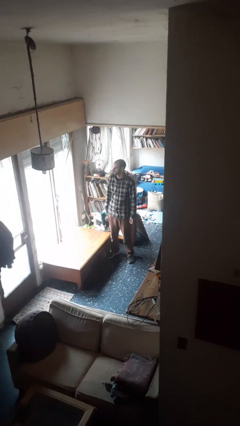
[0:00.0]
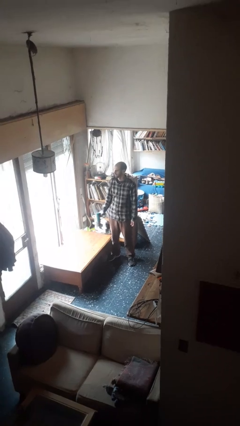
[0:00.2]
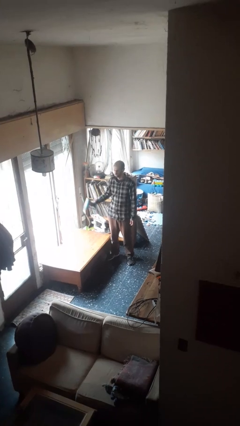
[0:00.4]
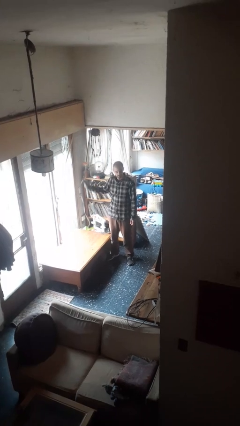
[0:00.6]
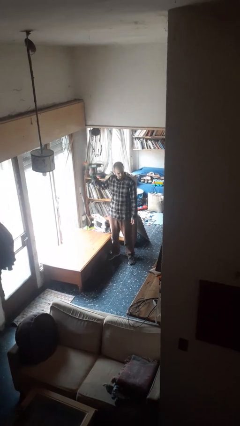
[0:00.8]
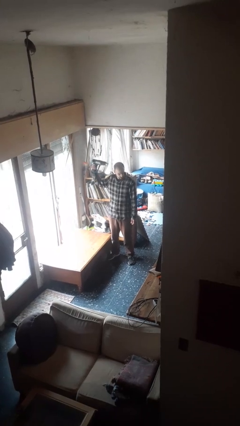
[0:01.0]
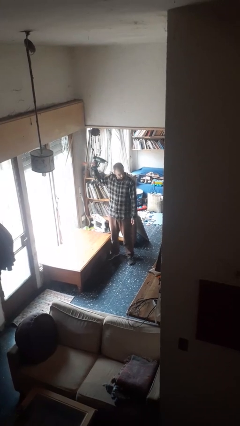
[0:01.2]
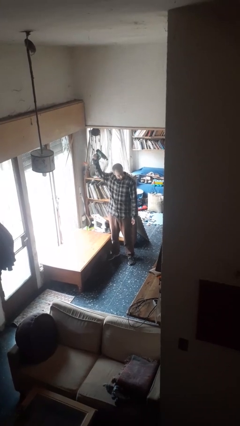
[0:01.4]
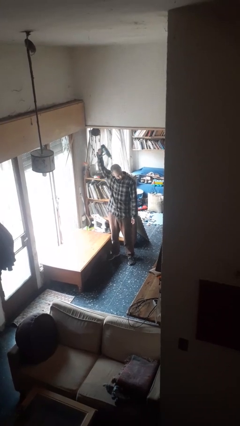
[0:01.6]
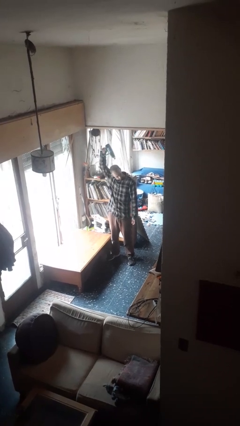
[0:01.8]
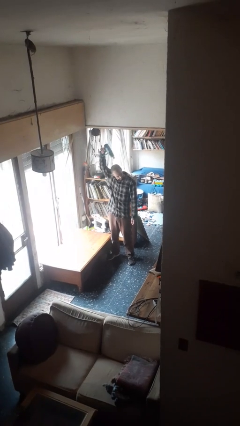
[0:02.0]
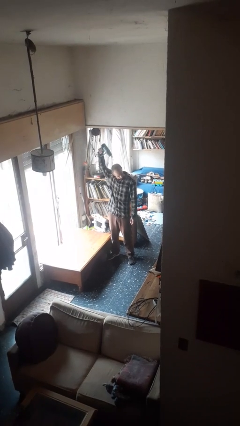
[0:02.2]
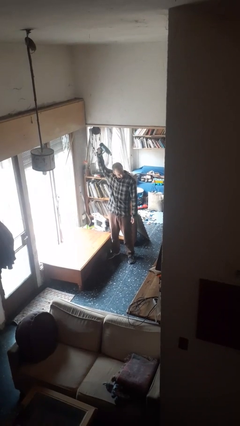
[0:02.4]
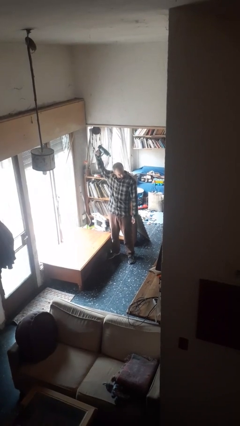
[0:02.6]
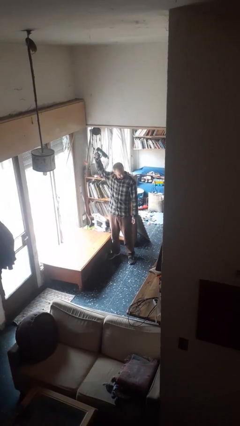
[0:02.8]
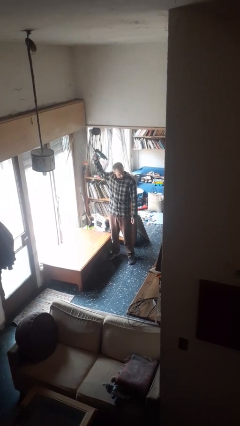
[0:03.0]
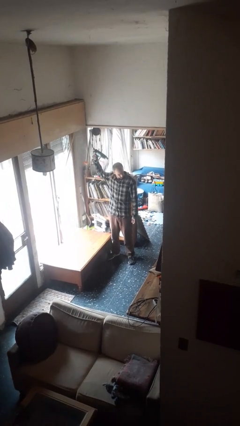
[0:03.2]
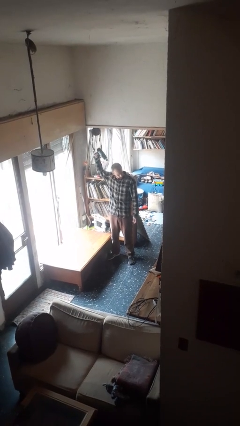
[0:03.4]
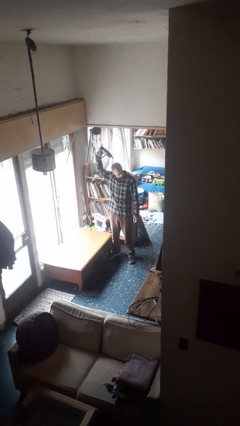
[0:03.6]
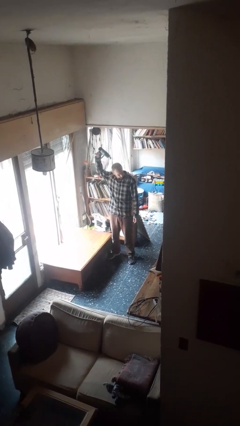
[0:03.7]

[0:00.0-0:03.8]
person dries hair with hairdryer

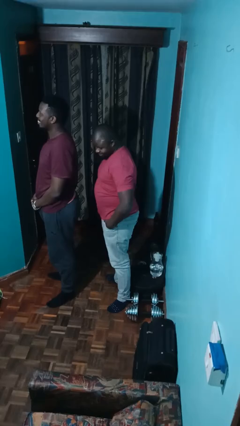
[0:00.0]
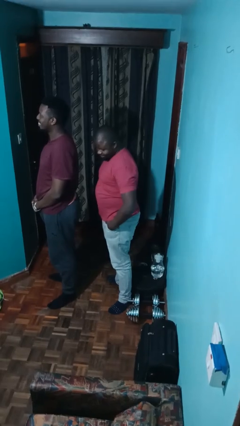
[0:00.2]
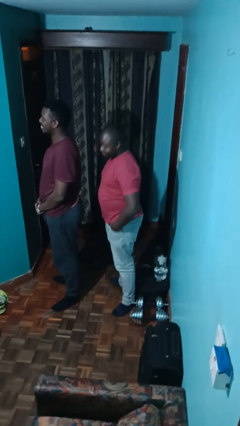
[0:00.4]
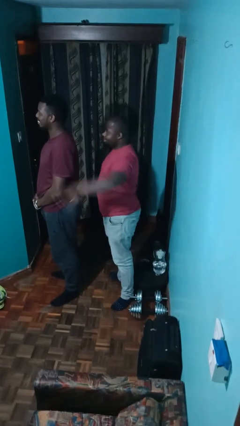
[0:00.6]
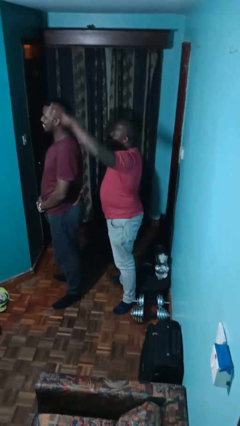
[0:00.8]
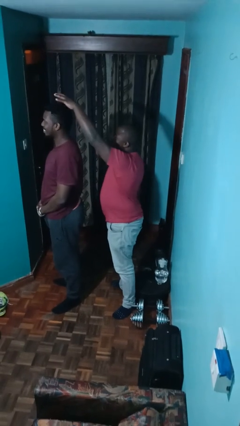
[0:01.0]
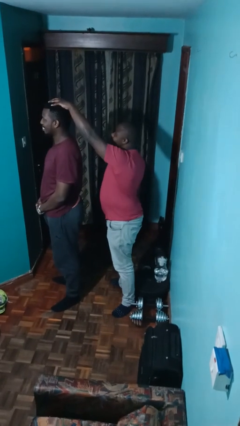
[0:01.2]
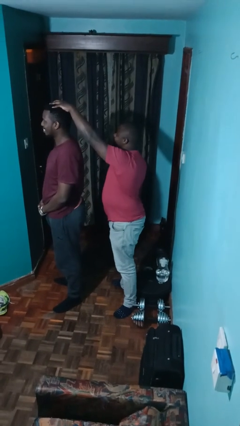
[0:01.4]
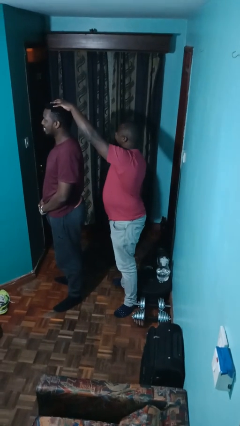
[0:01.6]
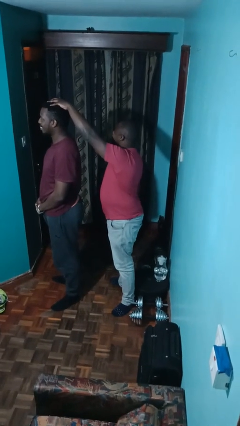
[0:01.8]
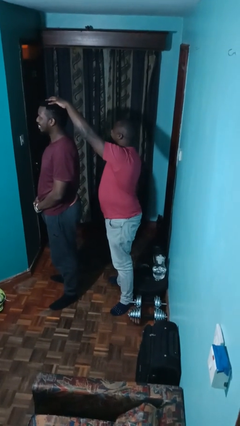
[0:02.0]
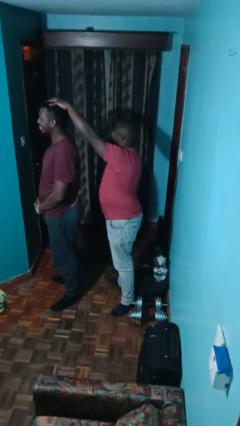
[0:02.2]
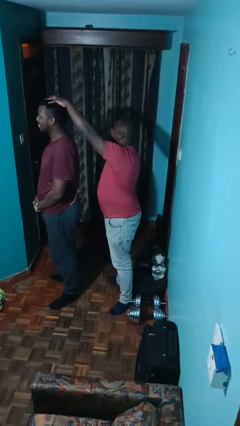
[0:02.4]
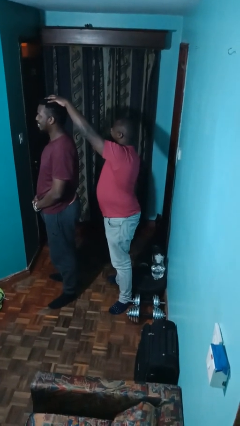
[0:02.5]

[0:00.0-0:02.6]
person grabs person by hair

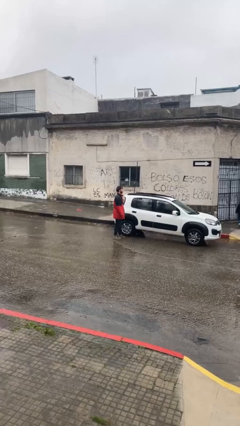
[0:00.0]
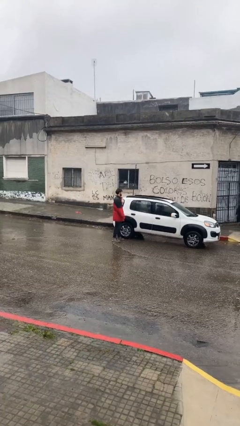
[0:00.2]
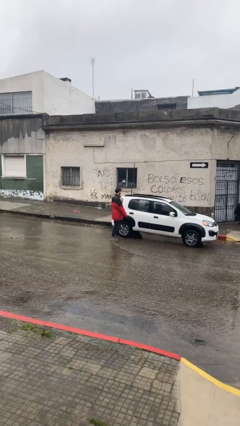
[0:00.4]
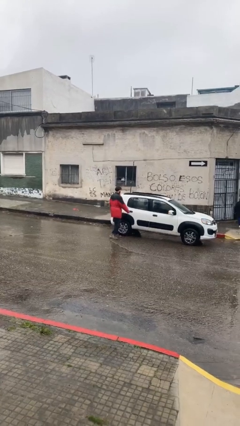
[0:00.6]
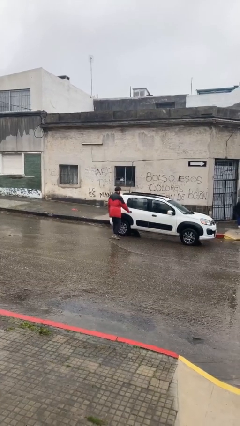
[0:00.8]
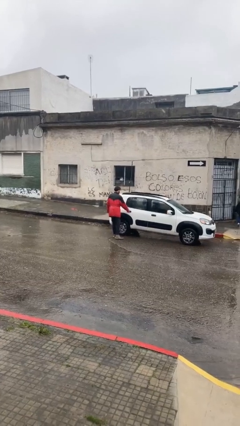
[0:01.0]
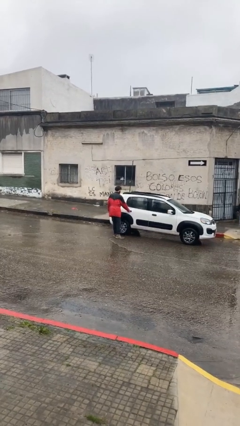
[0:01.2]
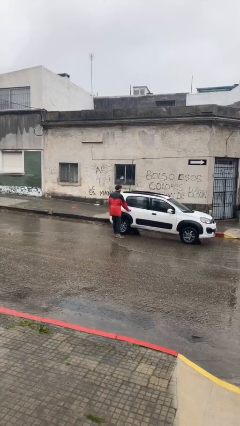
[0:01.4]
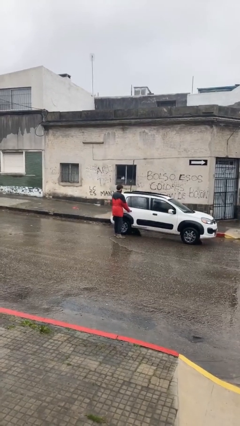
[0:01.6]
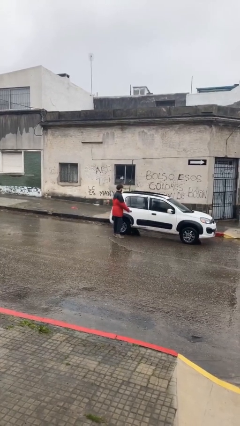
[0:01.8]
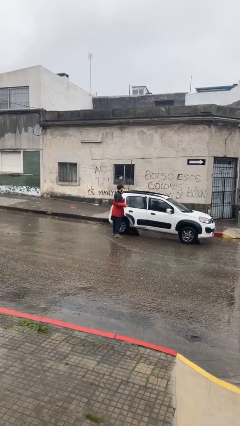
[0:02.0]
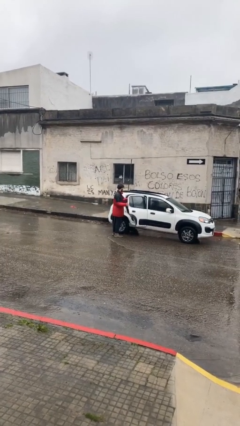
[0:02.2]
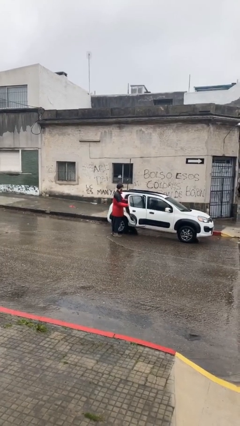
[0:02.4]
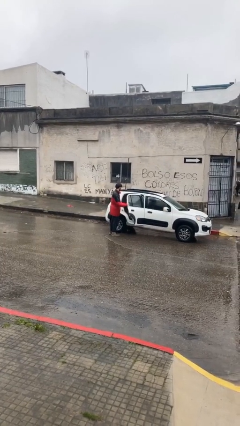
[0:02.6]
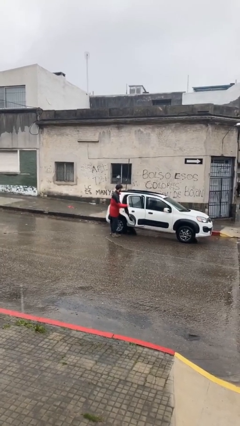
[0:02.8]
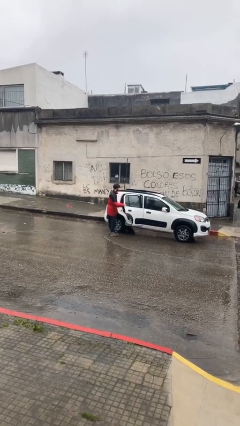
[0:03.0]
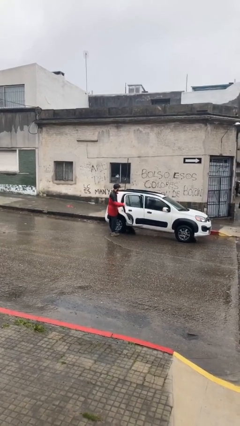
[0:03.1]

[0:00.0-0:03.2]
person opens car door

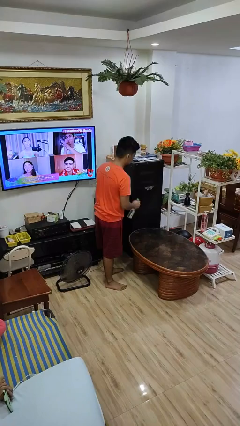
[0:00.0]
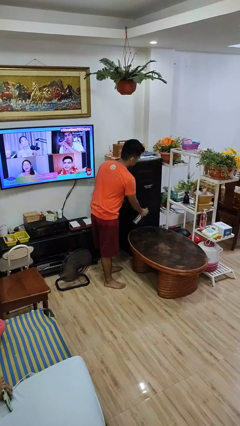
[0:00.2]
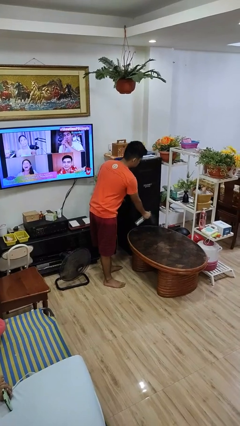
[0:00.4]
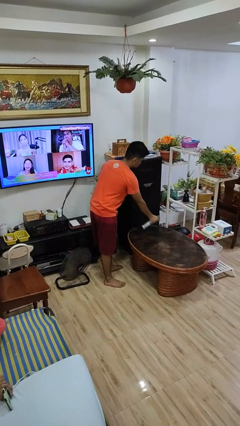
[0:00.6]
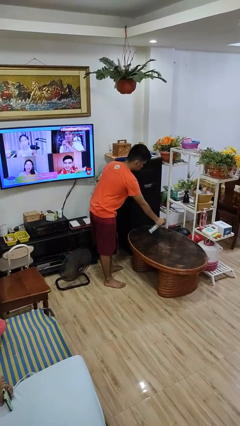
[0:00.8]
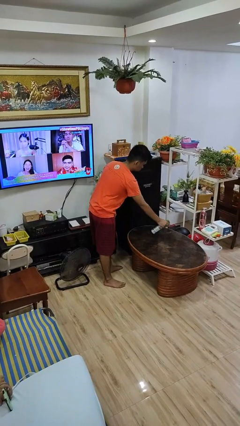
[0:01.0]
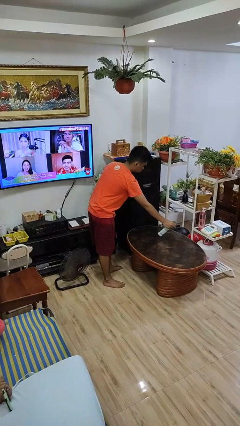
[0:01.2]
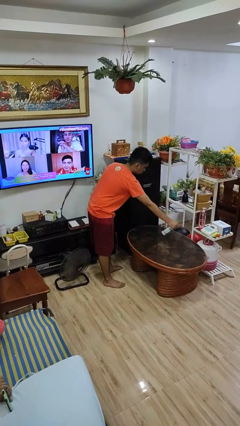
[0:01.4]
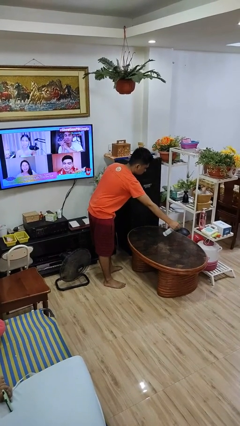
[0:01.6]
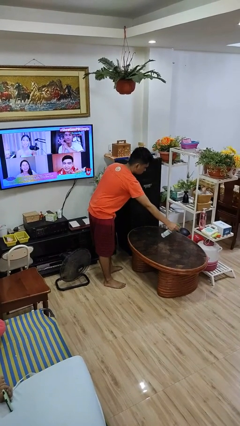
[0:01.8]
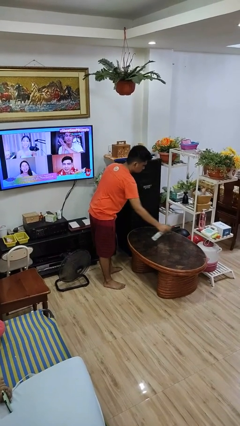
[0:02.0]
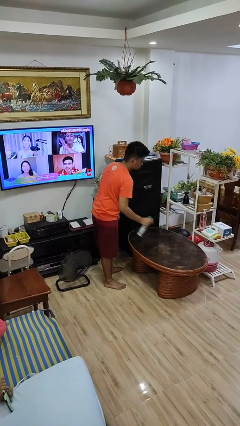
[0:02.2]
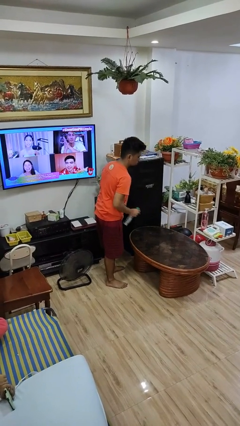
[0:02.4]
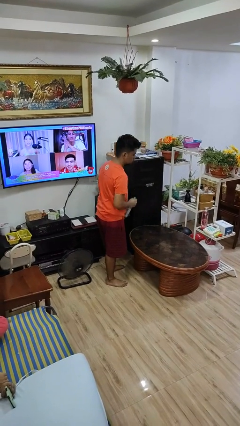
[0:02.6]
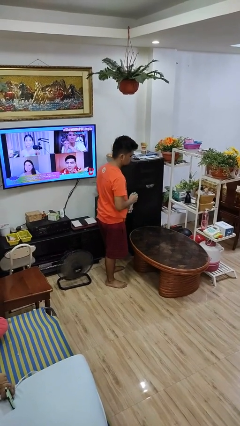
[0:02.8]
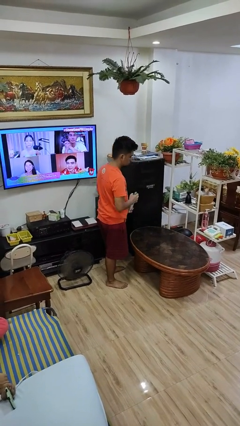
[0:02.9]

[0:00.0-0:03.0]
person sprays from bottle

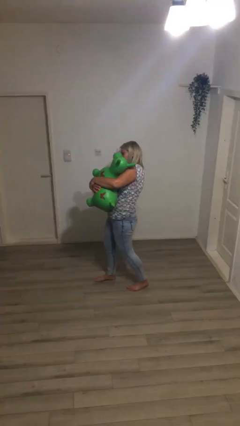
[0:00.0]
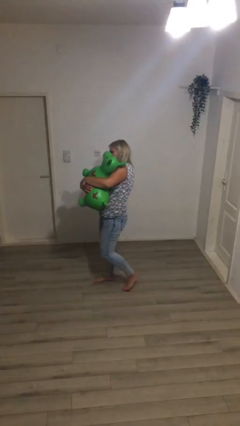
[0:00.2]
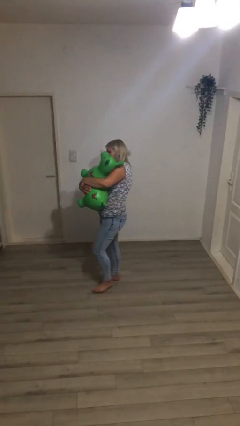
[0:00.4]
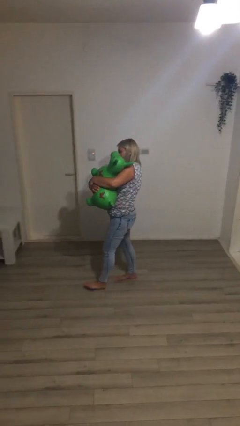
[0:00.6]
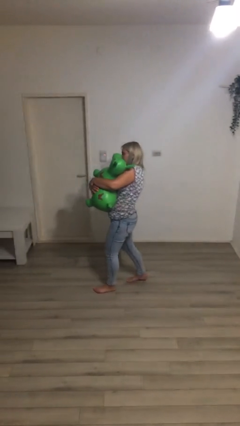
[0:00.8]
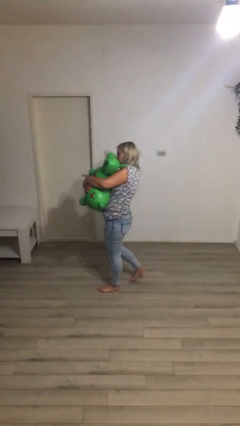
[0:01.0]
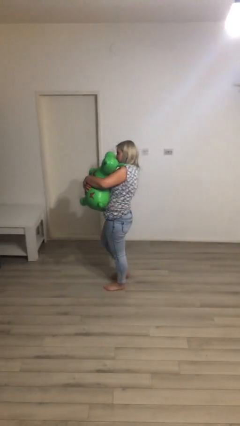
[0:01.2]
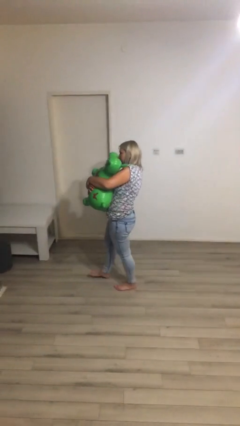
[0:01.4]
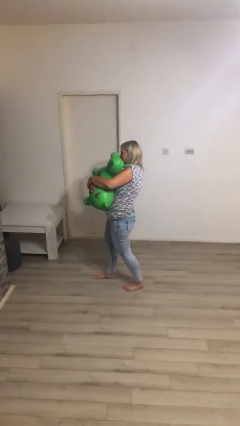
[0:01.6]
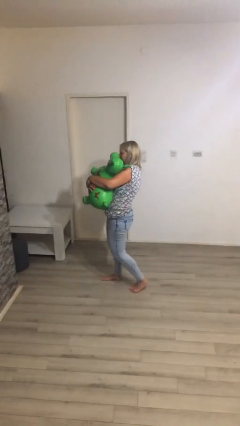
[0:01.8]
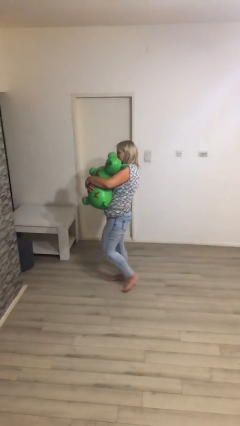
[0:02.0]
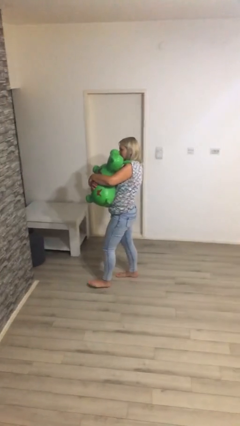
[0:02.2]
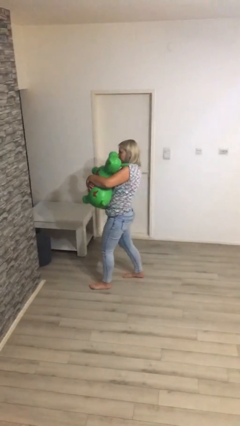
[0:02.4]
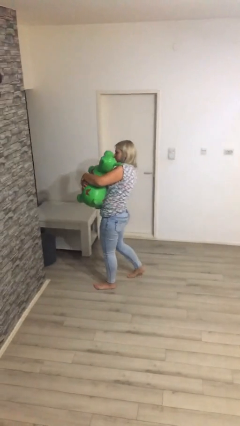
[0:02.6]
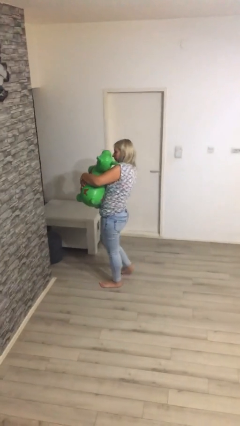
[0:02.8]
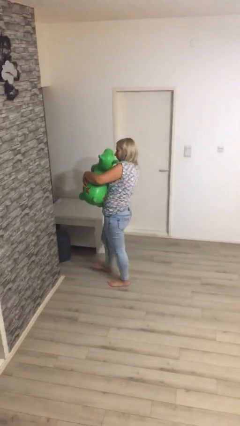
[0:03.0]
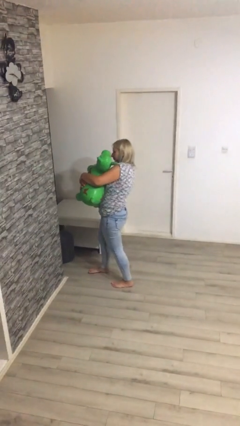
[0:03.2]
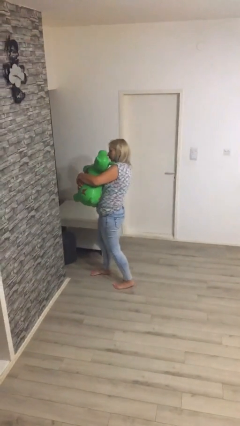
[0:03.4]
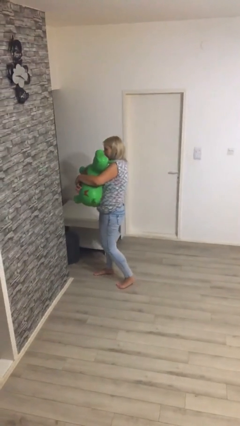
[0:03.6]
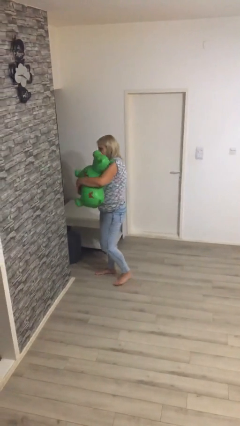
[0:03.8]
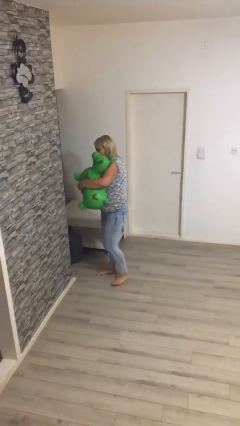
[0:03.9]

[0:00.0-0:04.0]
person carries heavy object

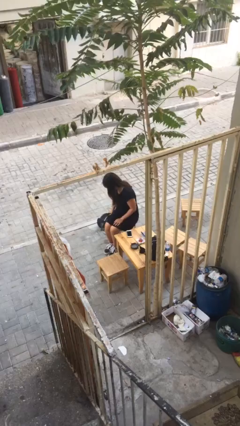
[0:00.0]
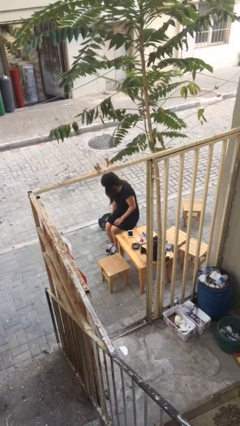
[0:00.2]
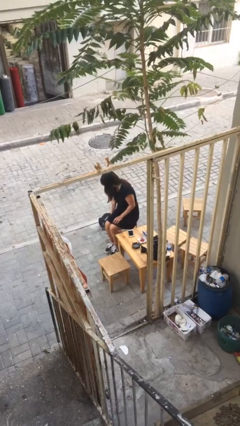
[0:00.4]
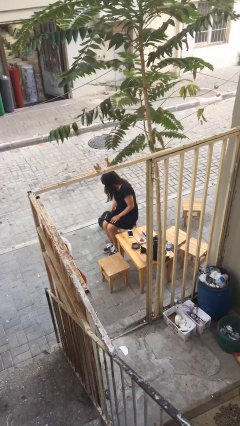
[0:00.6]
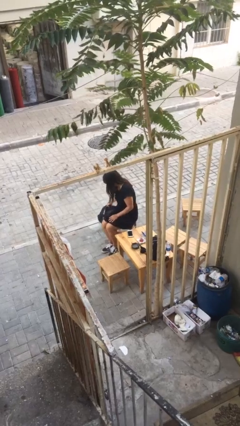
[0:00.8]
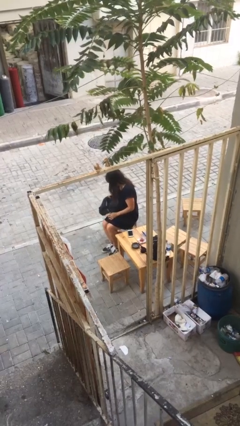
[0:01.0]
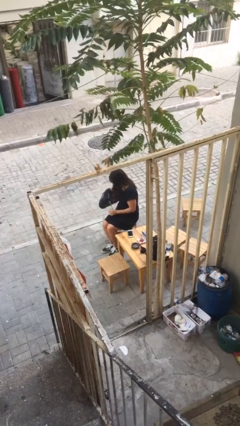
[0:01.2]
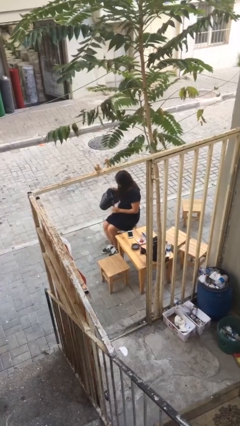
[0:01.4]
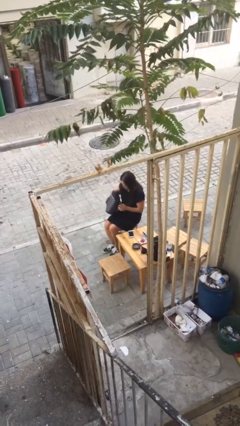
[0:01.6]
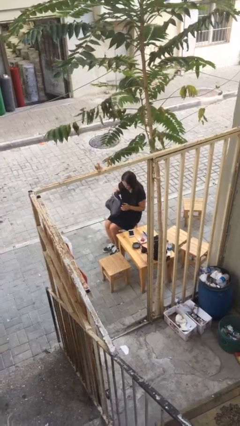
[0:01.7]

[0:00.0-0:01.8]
person picks up object from floor
